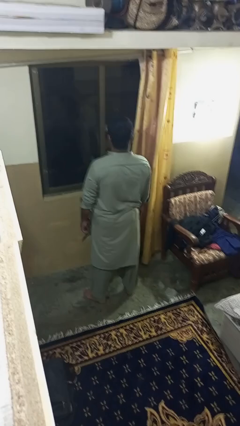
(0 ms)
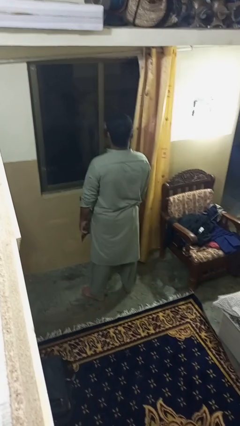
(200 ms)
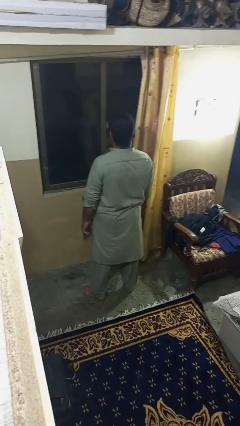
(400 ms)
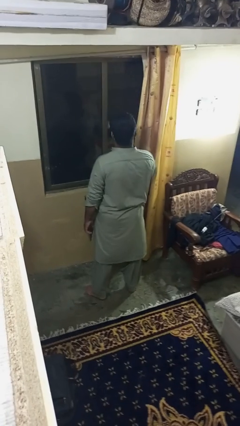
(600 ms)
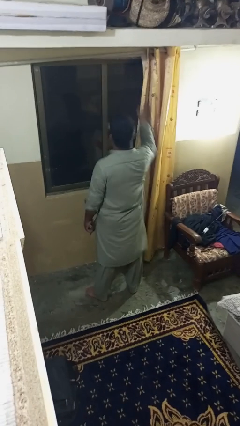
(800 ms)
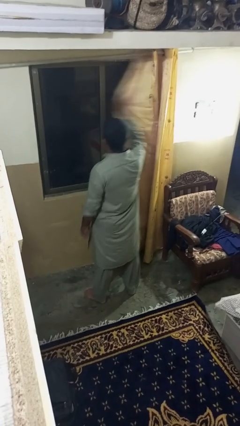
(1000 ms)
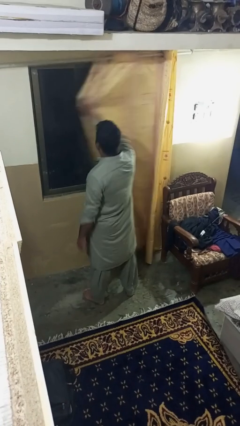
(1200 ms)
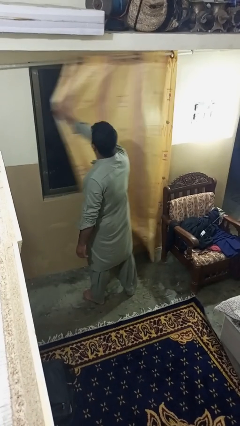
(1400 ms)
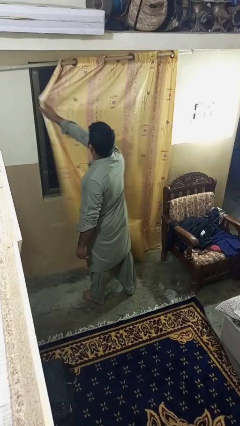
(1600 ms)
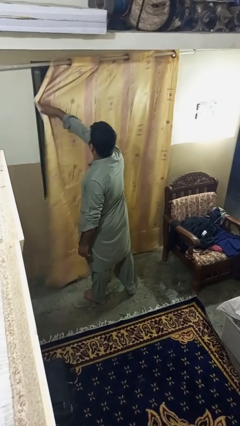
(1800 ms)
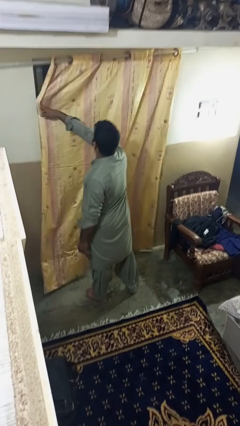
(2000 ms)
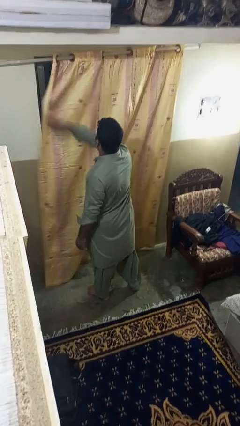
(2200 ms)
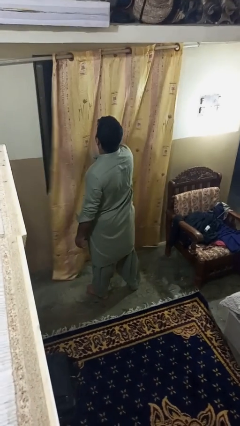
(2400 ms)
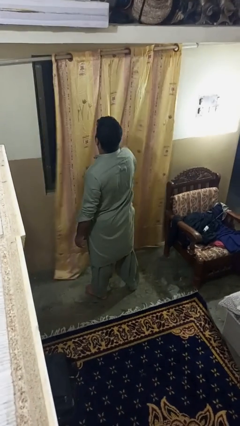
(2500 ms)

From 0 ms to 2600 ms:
person closes curtains

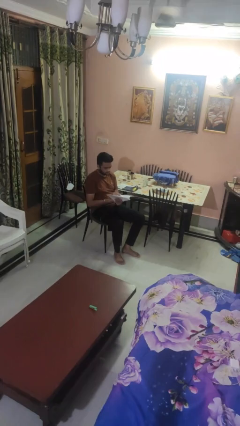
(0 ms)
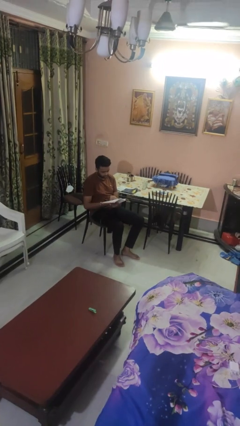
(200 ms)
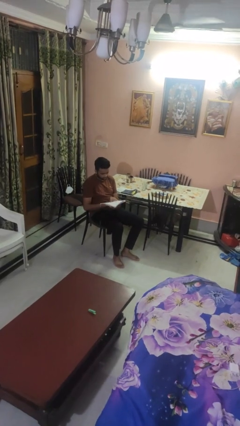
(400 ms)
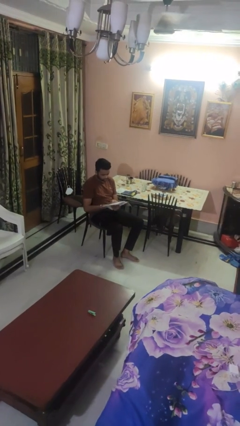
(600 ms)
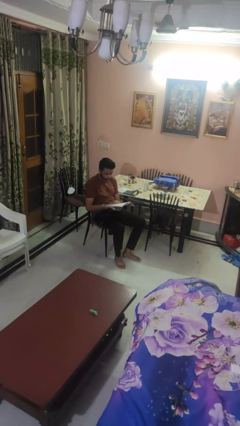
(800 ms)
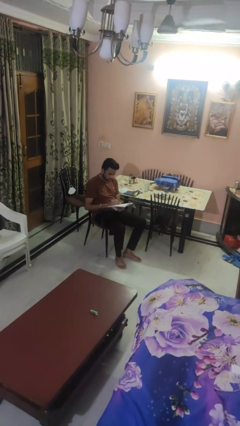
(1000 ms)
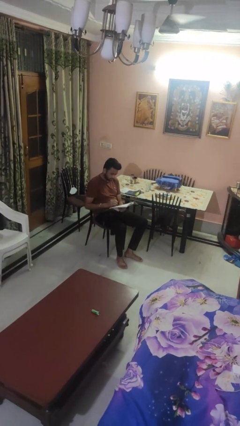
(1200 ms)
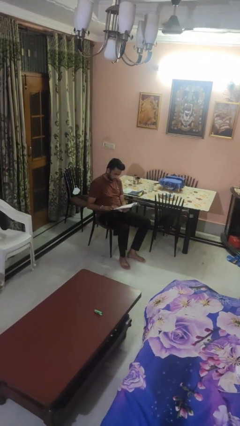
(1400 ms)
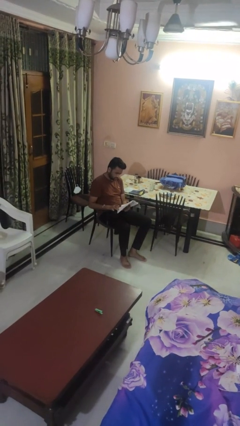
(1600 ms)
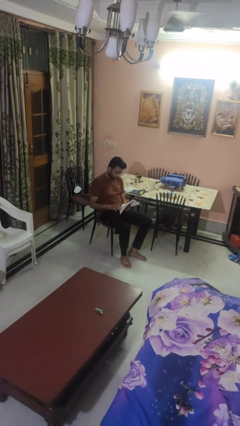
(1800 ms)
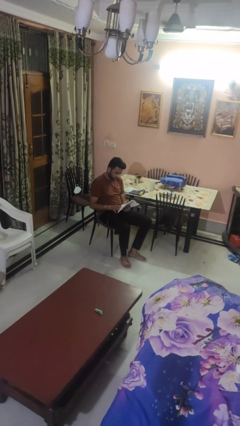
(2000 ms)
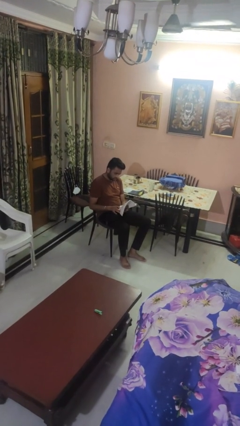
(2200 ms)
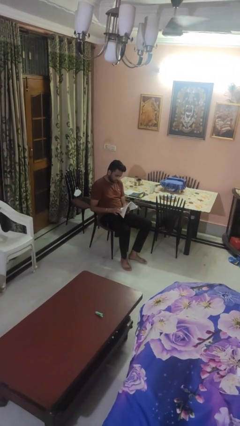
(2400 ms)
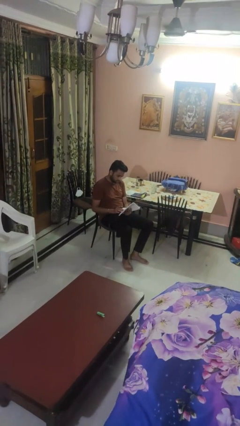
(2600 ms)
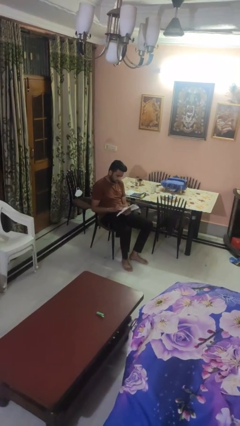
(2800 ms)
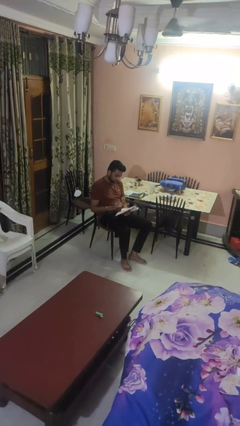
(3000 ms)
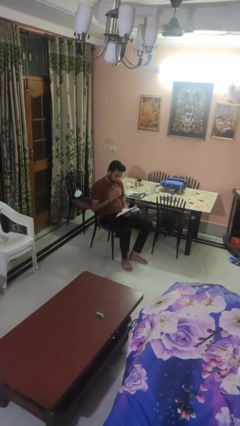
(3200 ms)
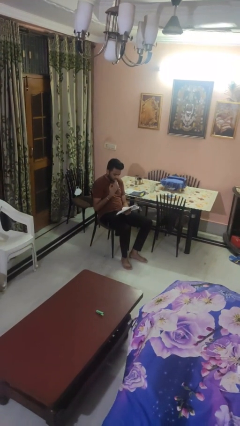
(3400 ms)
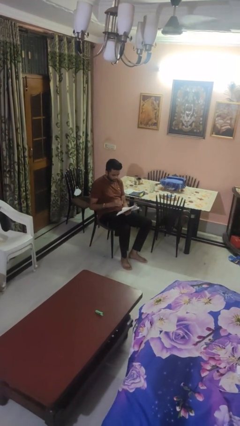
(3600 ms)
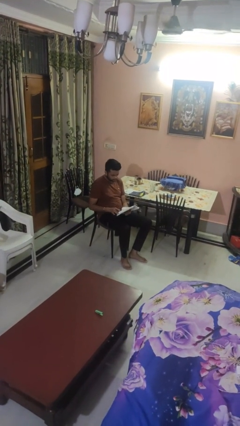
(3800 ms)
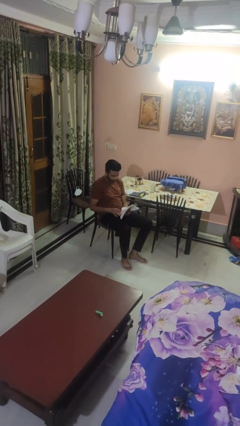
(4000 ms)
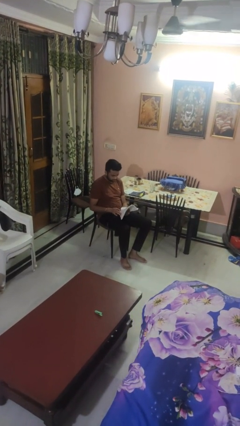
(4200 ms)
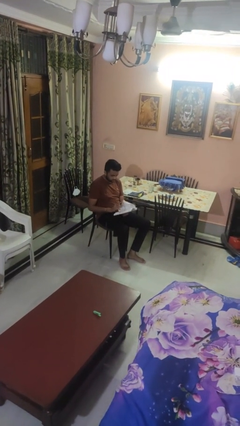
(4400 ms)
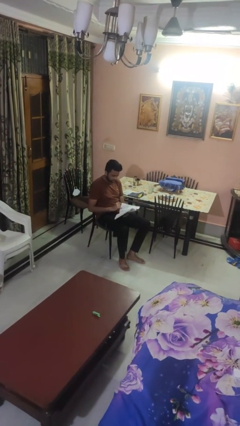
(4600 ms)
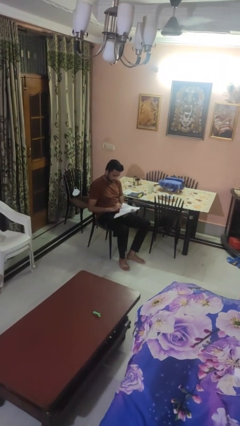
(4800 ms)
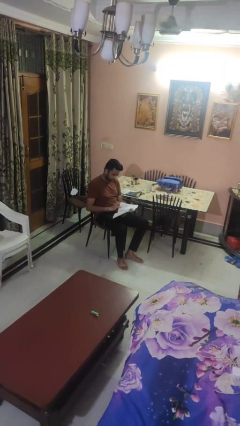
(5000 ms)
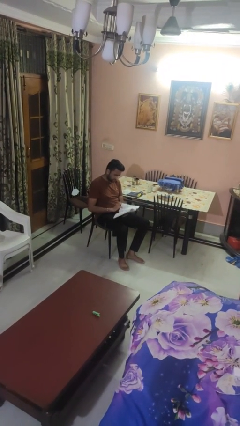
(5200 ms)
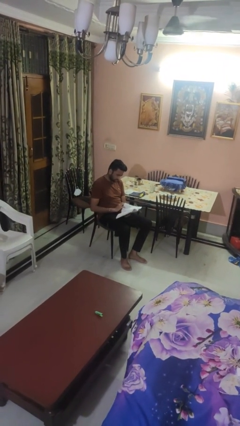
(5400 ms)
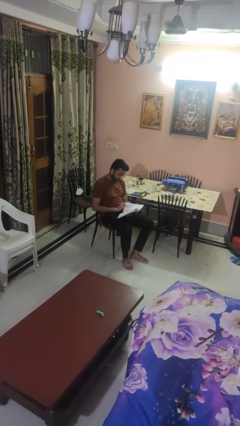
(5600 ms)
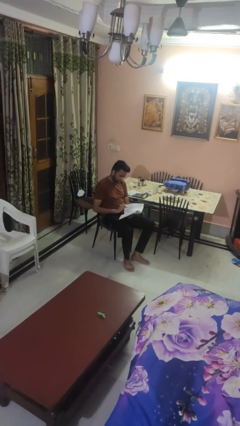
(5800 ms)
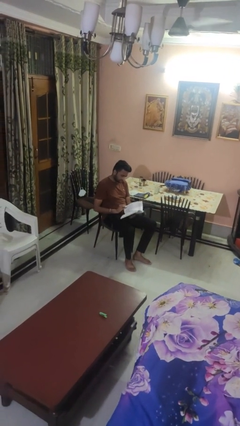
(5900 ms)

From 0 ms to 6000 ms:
person reads magazine

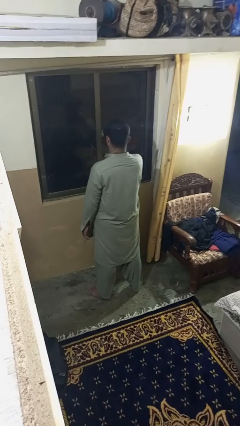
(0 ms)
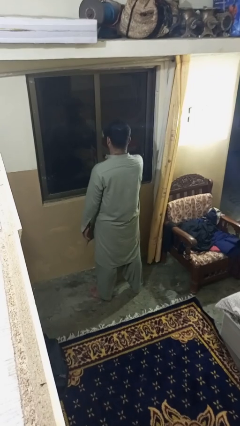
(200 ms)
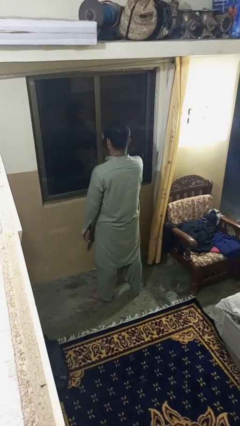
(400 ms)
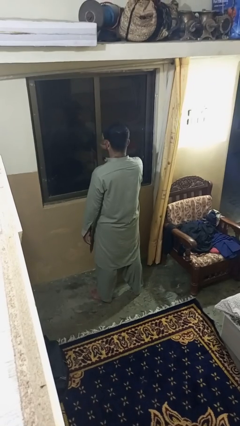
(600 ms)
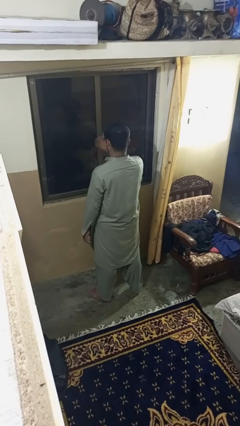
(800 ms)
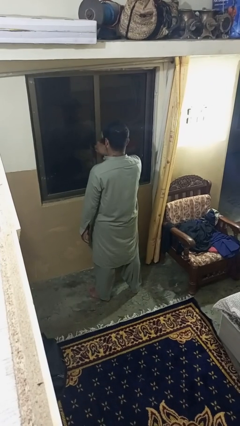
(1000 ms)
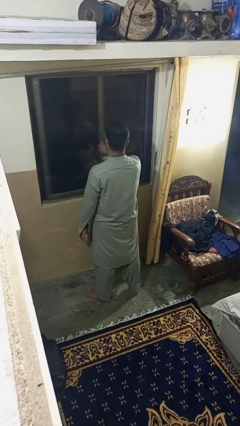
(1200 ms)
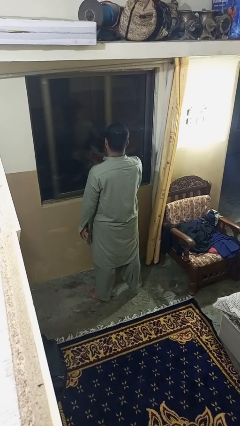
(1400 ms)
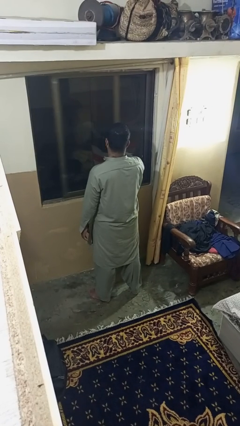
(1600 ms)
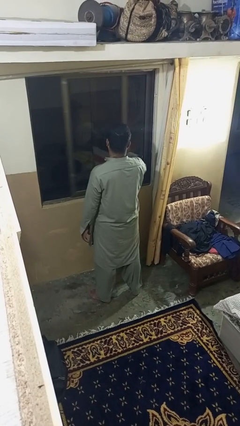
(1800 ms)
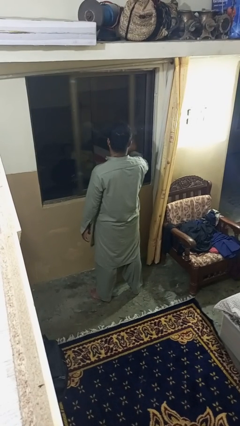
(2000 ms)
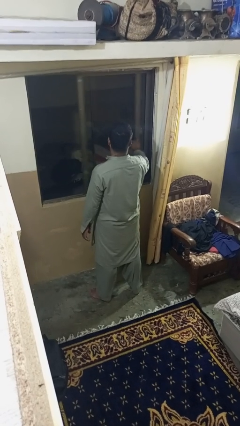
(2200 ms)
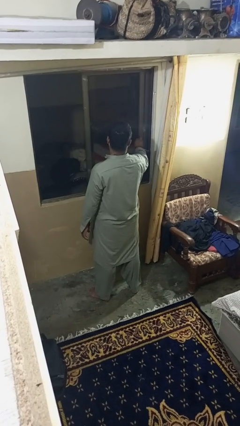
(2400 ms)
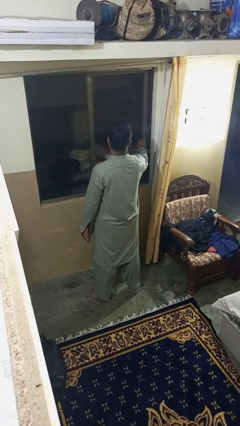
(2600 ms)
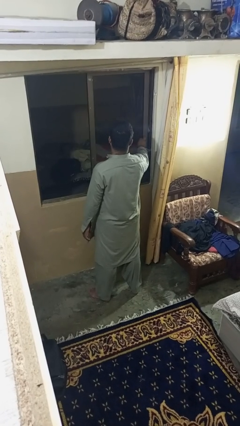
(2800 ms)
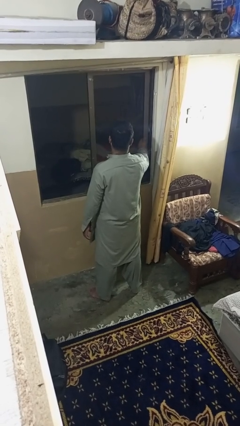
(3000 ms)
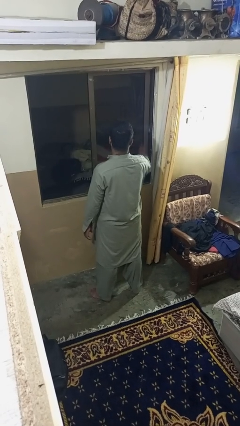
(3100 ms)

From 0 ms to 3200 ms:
person opens home window

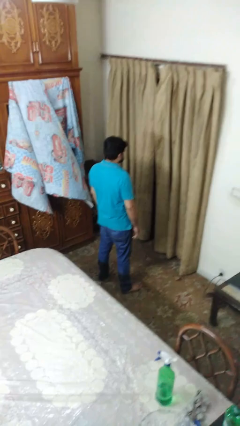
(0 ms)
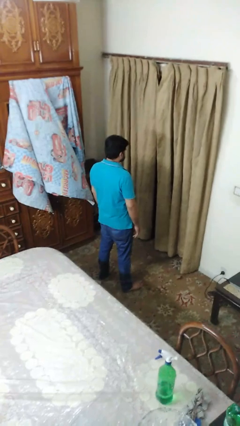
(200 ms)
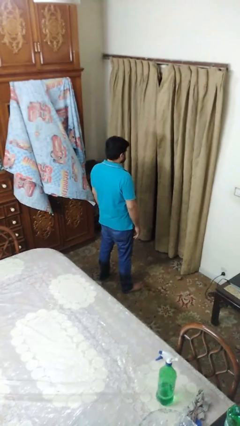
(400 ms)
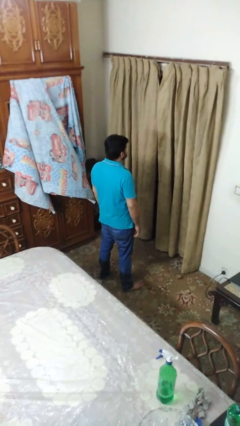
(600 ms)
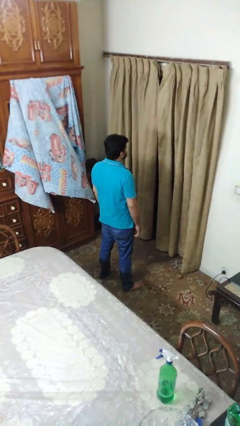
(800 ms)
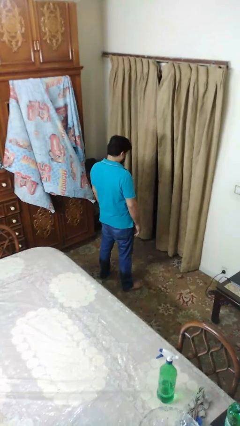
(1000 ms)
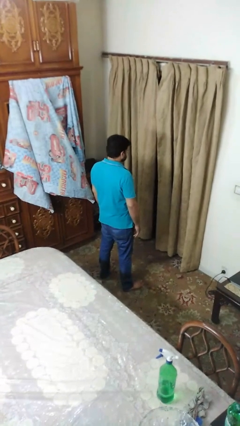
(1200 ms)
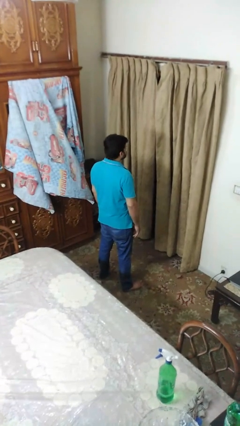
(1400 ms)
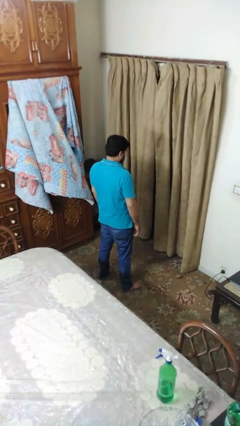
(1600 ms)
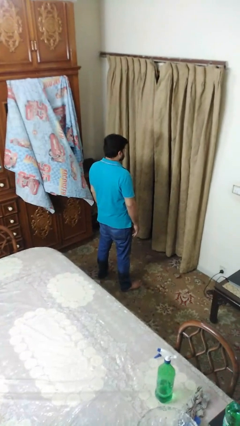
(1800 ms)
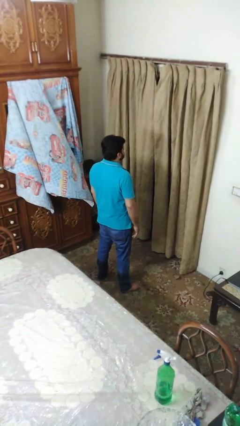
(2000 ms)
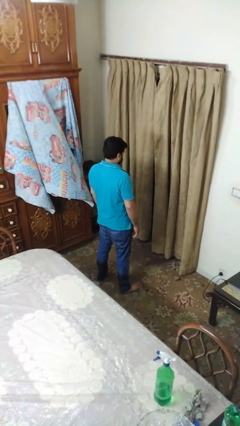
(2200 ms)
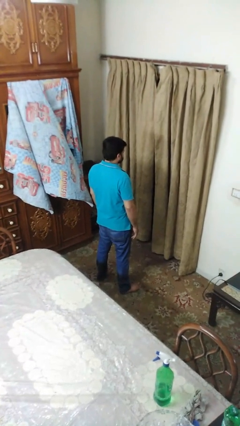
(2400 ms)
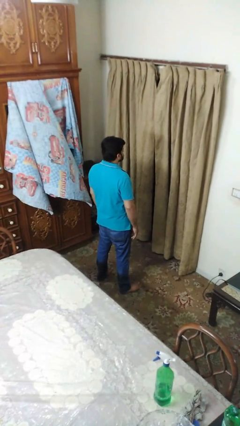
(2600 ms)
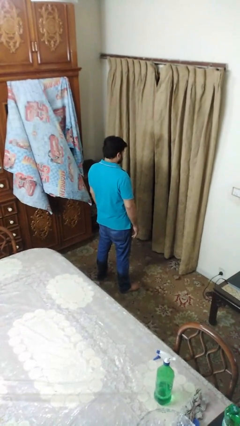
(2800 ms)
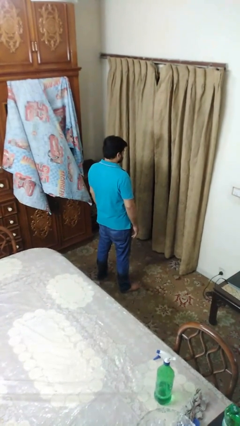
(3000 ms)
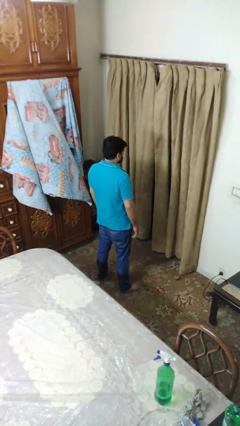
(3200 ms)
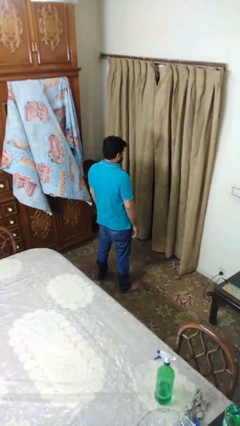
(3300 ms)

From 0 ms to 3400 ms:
person nods head

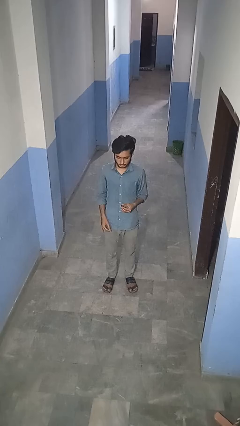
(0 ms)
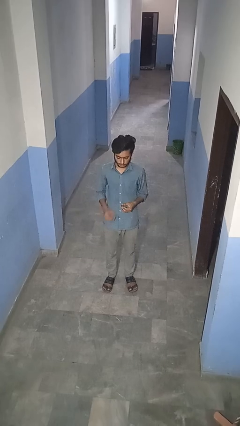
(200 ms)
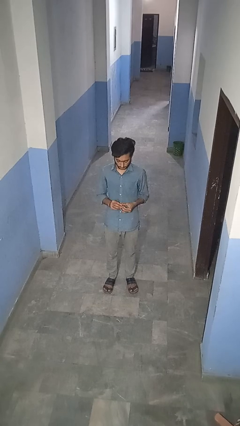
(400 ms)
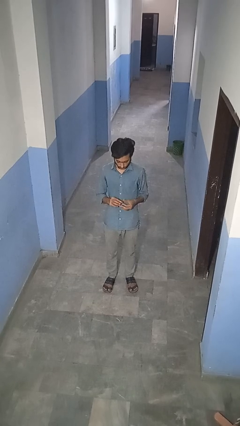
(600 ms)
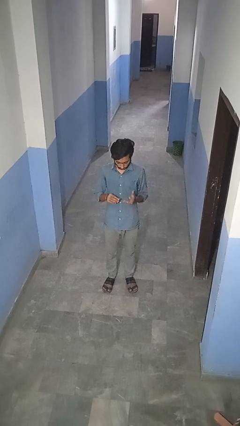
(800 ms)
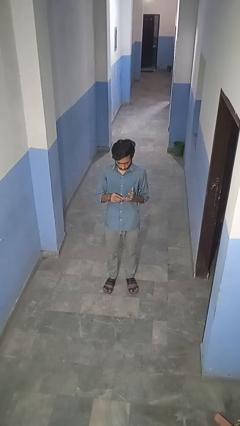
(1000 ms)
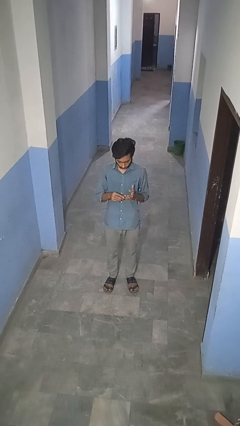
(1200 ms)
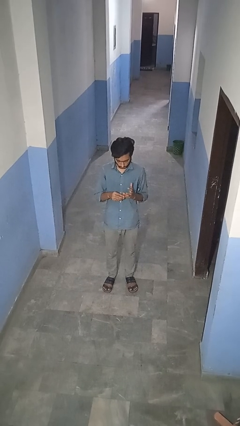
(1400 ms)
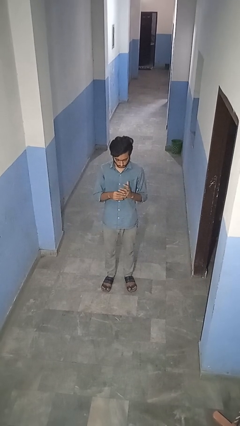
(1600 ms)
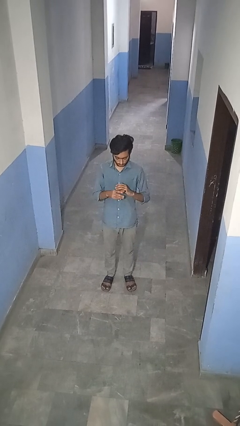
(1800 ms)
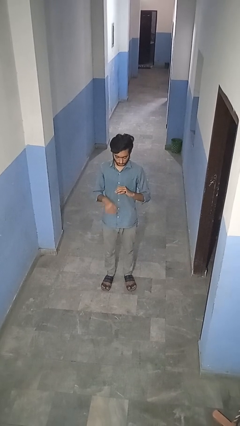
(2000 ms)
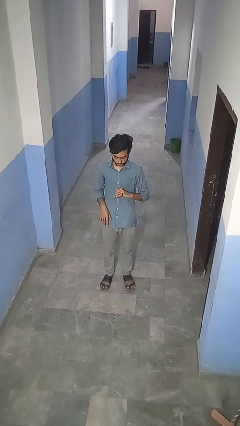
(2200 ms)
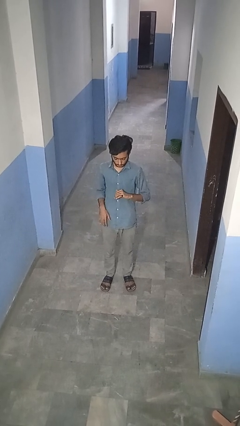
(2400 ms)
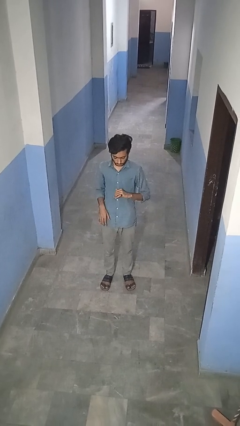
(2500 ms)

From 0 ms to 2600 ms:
person puts on ring
